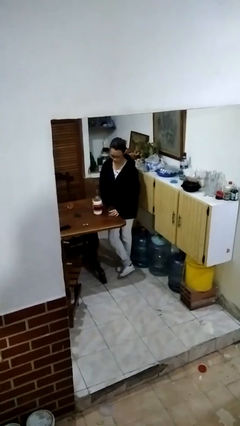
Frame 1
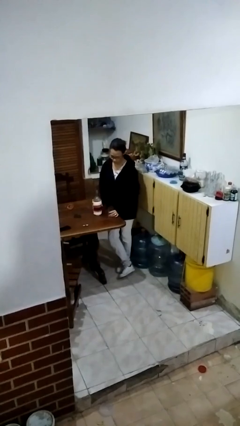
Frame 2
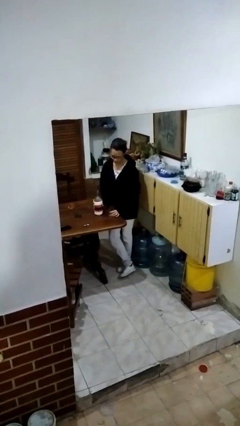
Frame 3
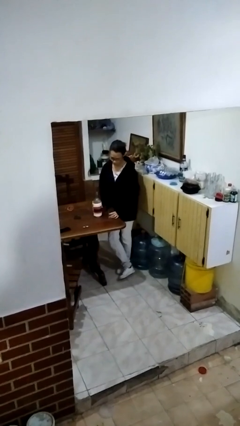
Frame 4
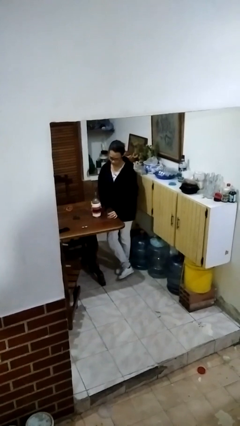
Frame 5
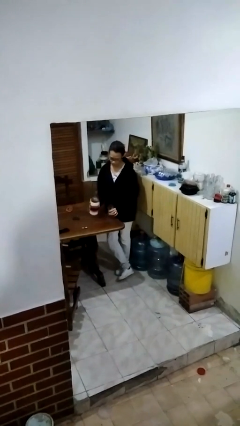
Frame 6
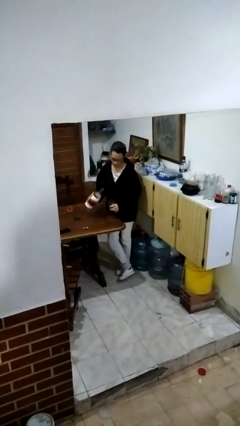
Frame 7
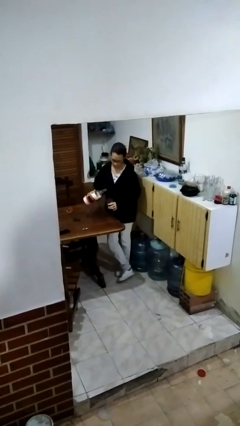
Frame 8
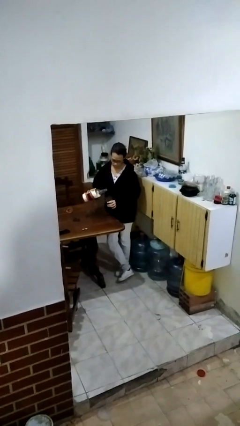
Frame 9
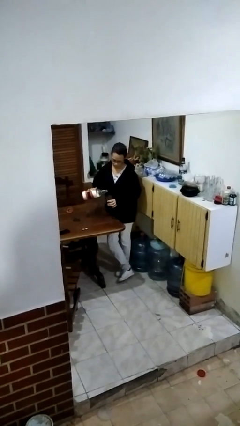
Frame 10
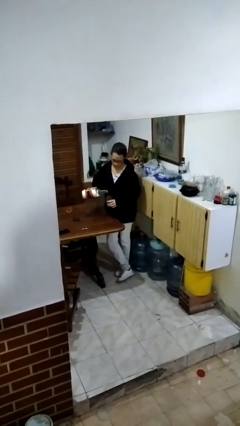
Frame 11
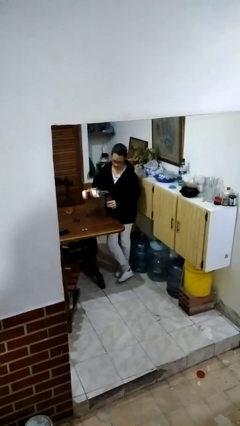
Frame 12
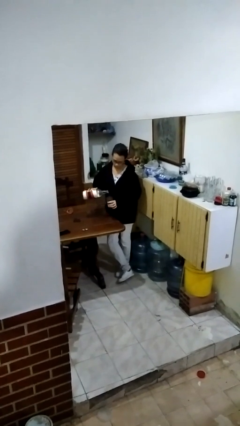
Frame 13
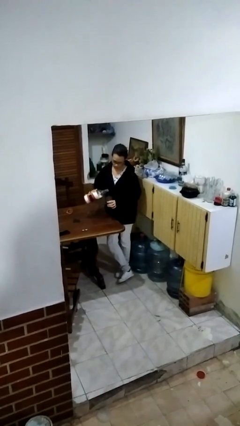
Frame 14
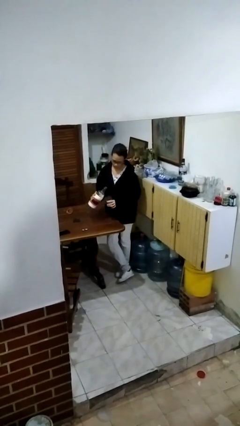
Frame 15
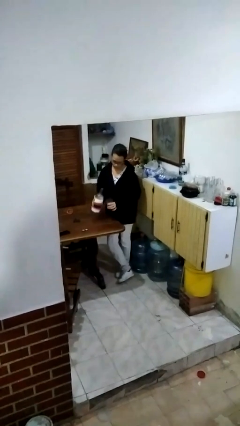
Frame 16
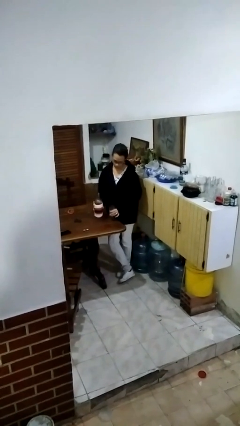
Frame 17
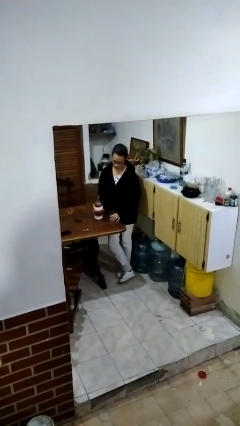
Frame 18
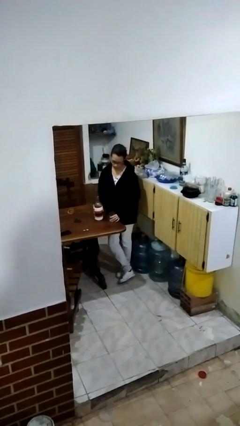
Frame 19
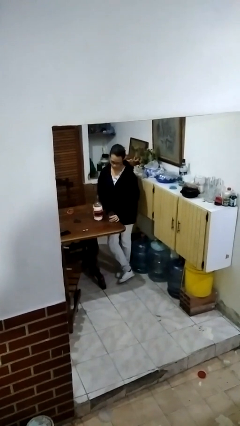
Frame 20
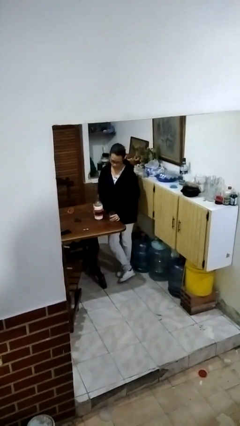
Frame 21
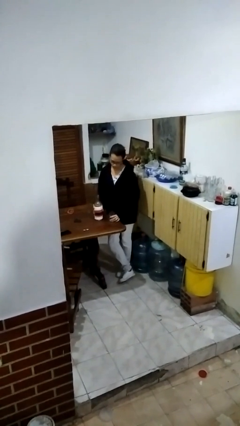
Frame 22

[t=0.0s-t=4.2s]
person pours liquid into cup

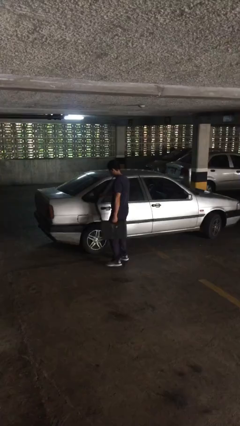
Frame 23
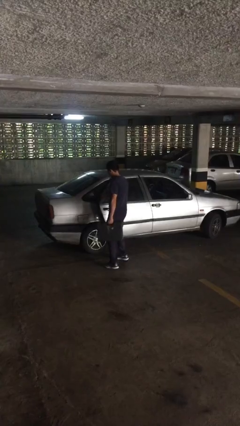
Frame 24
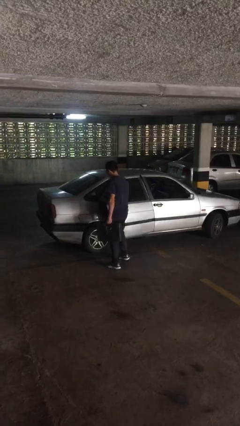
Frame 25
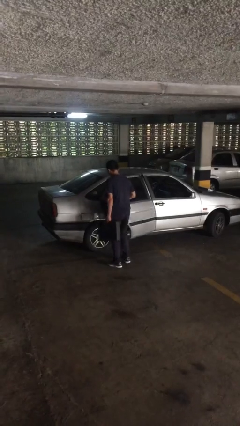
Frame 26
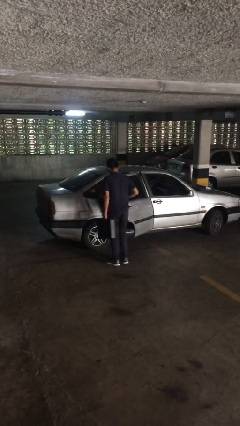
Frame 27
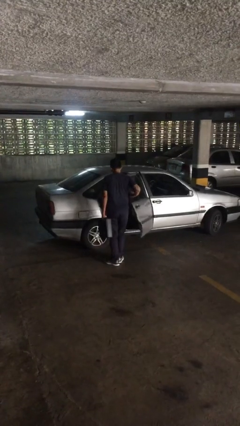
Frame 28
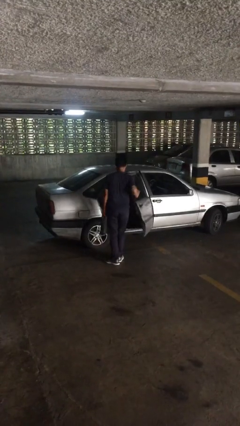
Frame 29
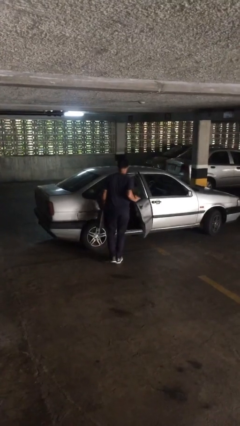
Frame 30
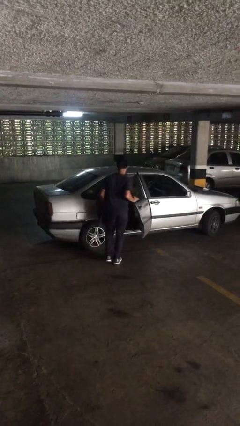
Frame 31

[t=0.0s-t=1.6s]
person opens car door

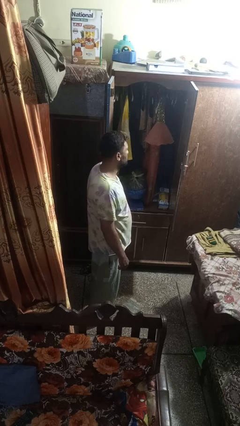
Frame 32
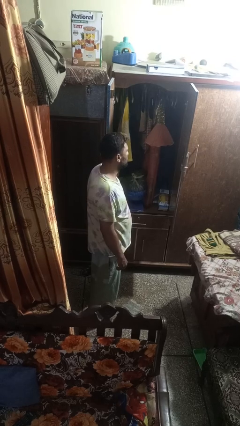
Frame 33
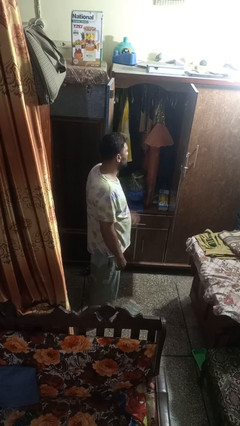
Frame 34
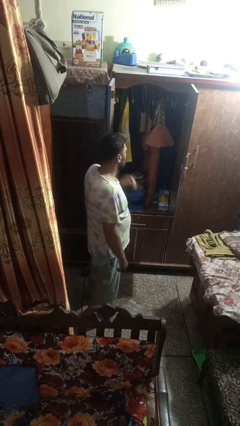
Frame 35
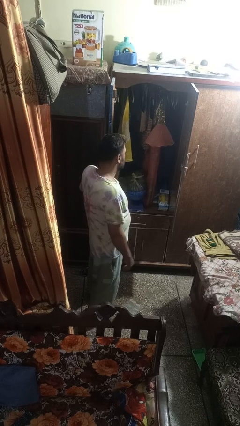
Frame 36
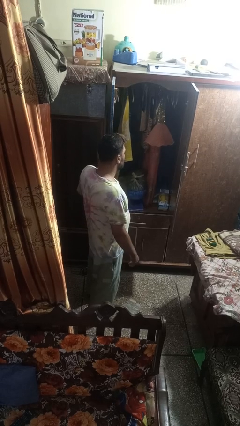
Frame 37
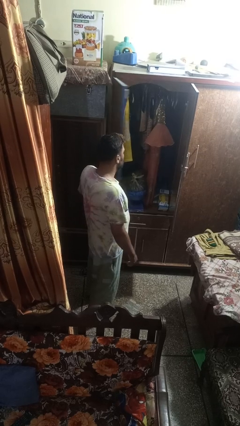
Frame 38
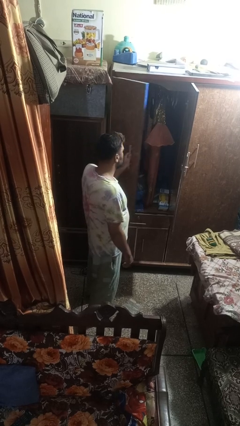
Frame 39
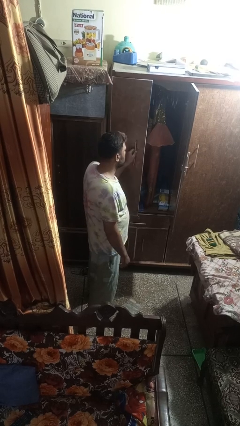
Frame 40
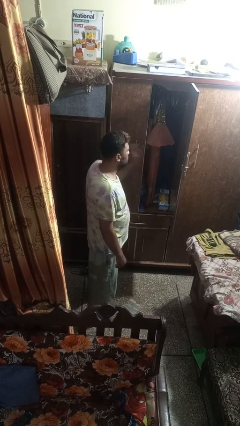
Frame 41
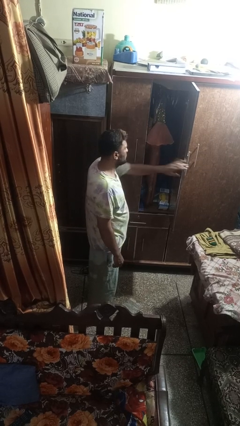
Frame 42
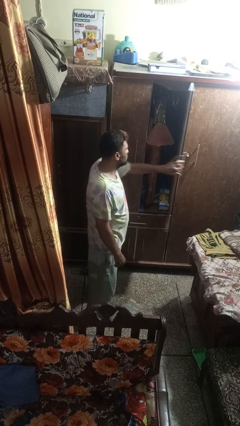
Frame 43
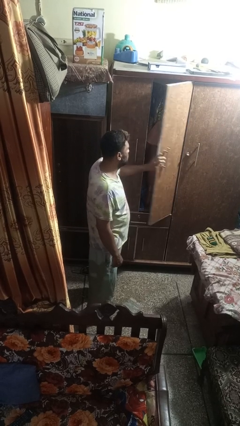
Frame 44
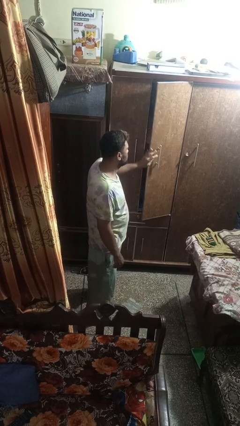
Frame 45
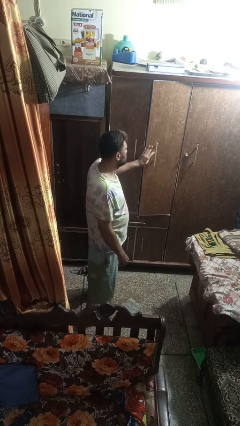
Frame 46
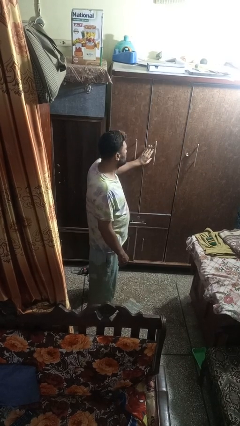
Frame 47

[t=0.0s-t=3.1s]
person closes closet door

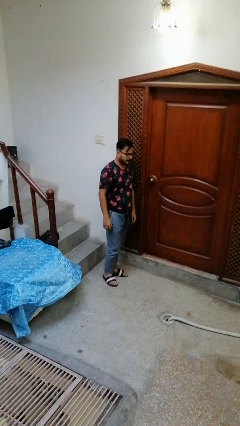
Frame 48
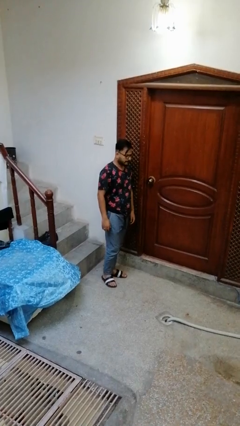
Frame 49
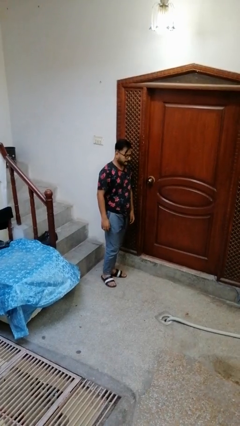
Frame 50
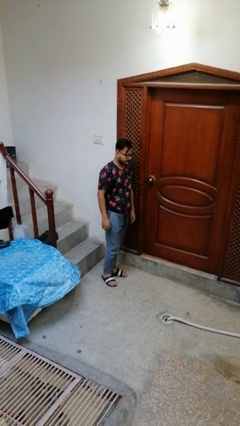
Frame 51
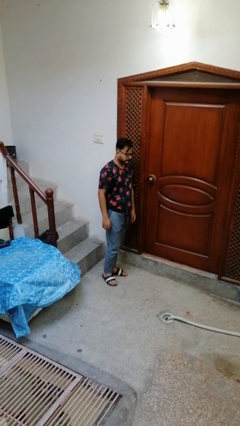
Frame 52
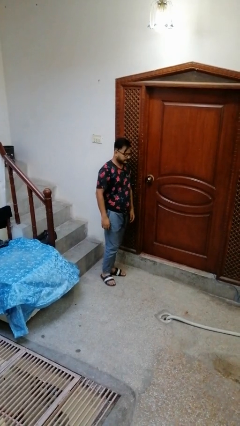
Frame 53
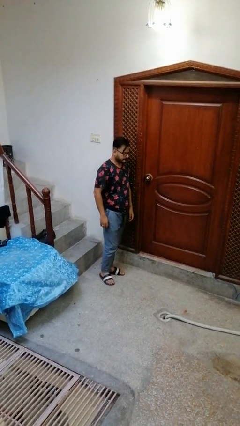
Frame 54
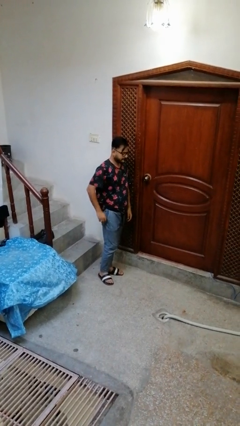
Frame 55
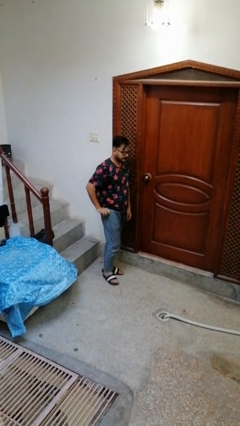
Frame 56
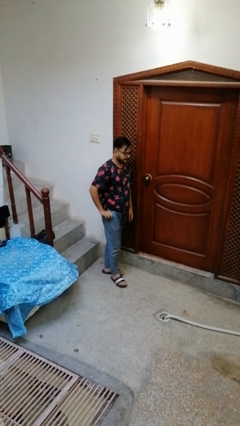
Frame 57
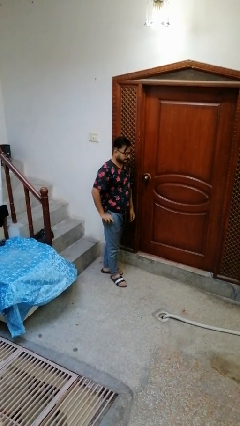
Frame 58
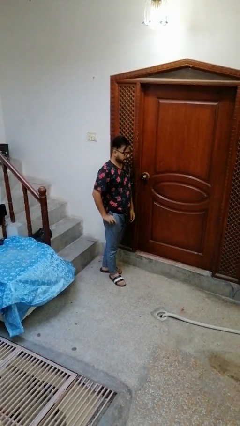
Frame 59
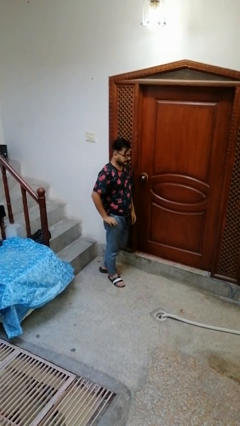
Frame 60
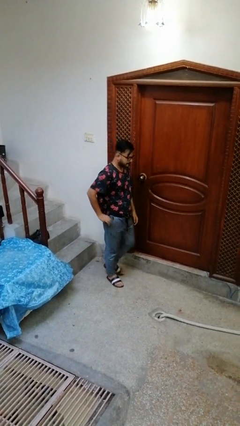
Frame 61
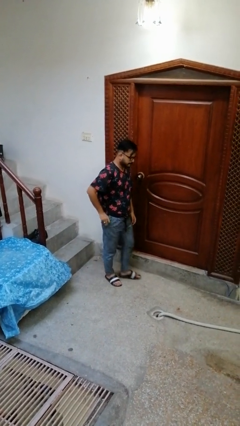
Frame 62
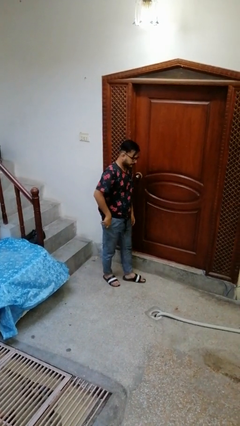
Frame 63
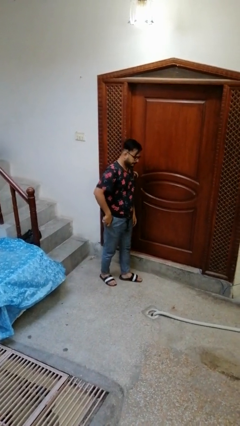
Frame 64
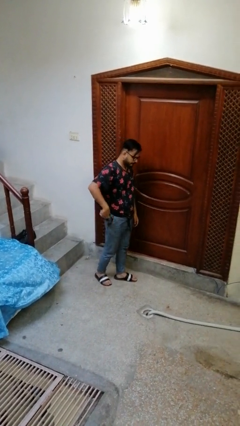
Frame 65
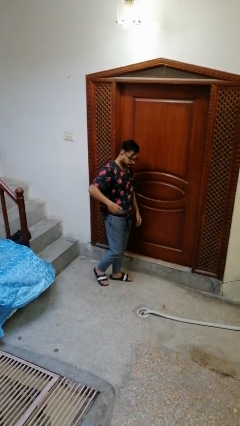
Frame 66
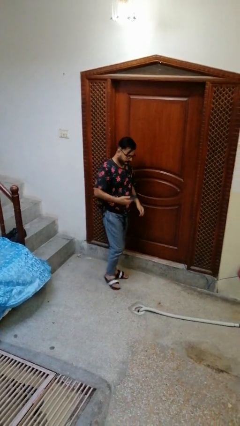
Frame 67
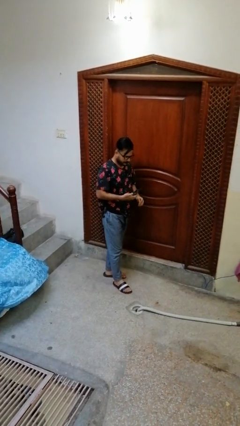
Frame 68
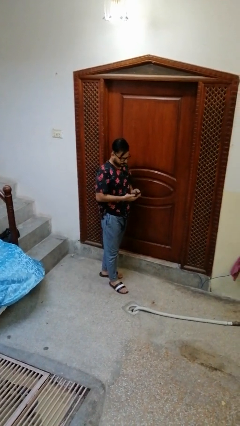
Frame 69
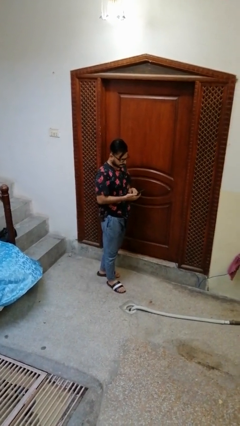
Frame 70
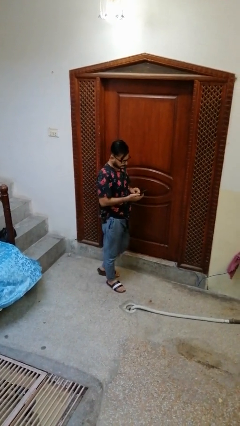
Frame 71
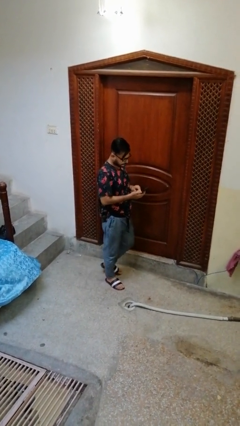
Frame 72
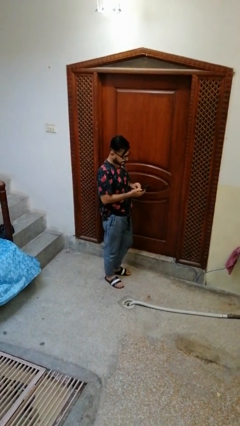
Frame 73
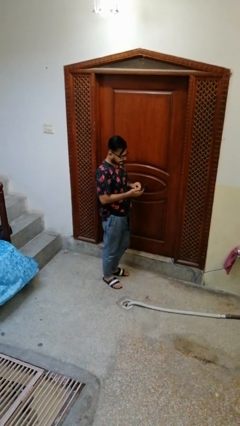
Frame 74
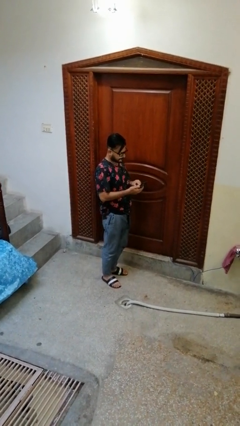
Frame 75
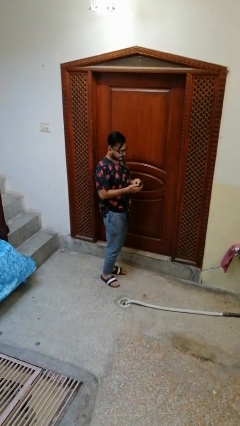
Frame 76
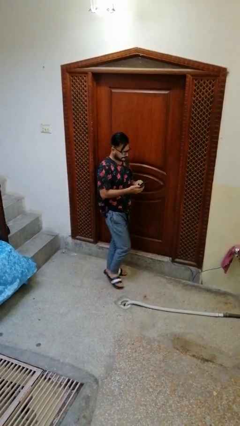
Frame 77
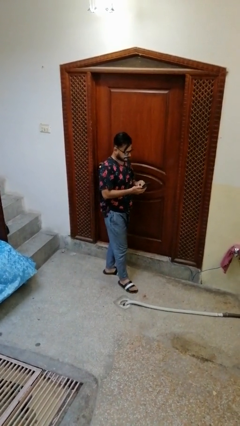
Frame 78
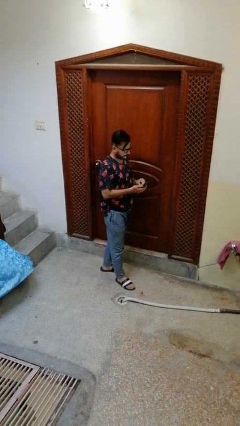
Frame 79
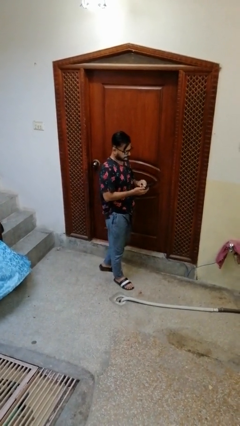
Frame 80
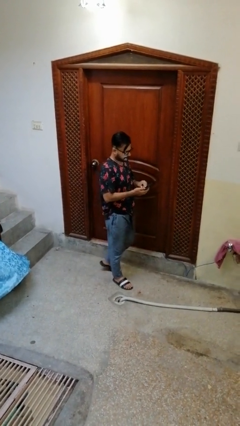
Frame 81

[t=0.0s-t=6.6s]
person takes phone from pocket

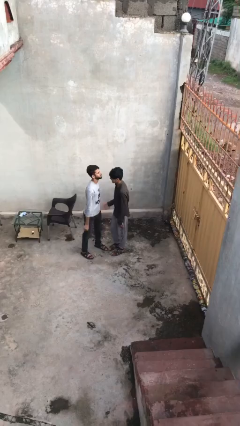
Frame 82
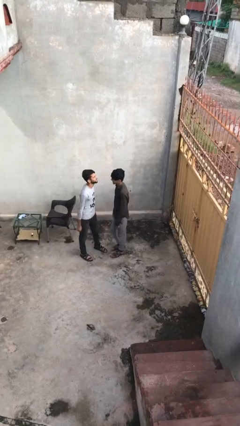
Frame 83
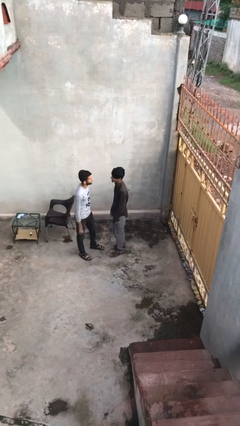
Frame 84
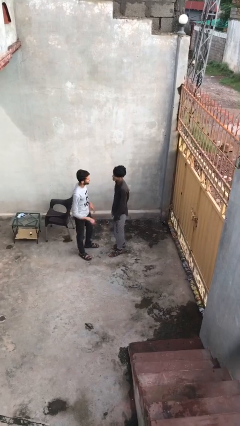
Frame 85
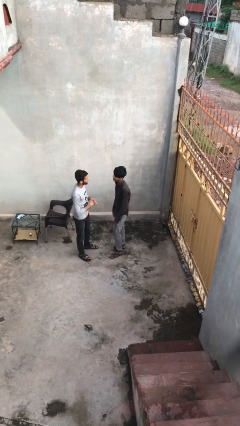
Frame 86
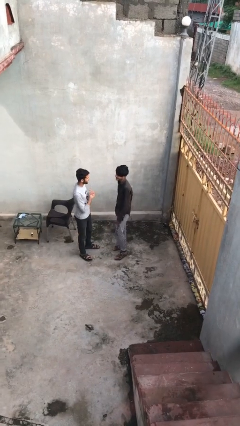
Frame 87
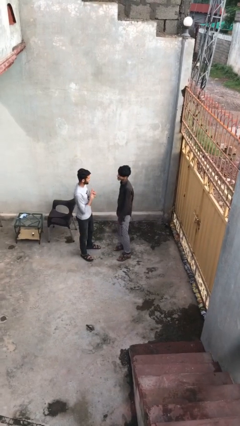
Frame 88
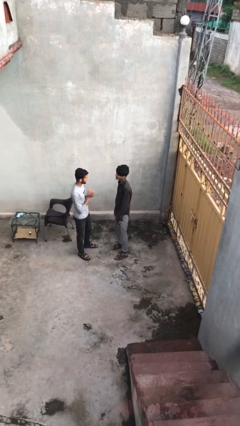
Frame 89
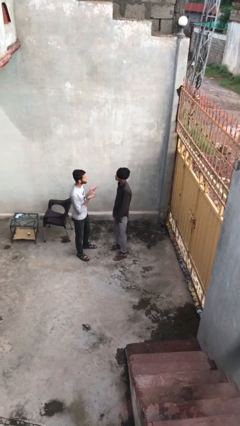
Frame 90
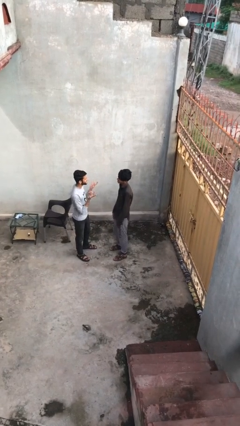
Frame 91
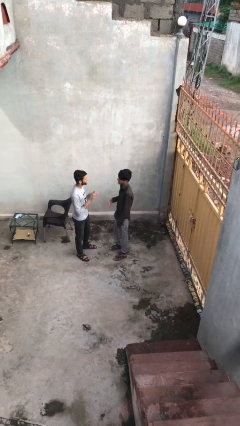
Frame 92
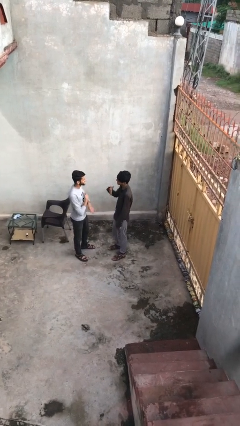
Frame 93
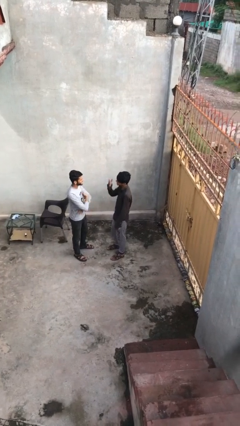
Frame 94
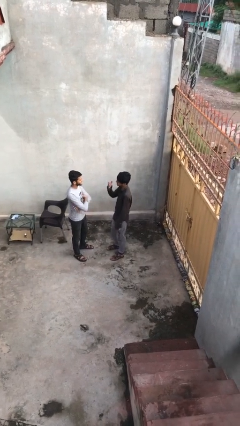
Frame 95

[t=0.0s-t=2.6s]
person talks to person
